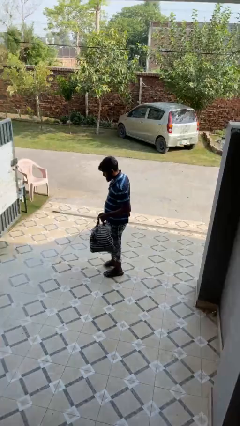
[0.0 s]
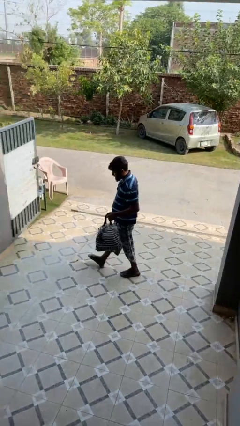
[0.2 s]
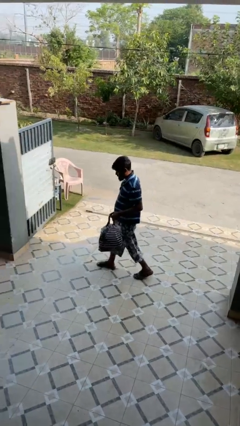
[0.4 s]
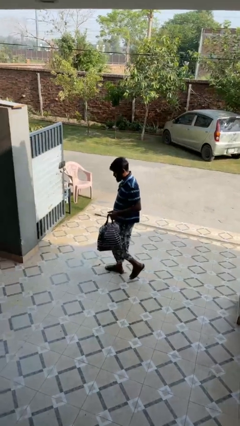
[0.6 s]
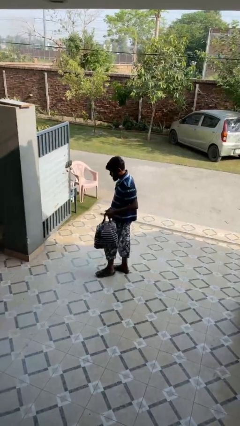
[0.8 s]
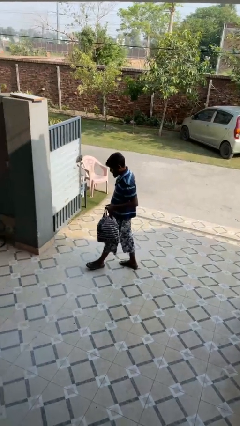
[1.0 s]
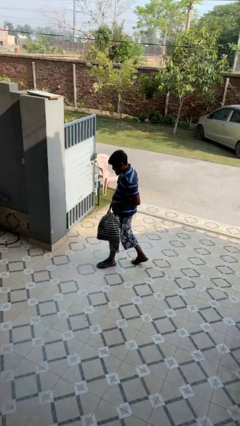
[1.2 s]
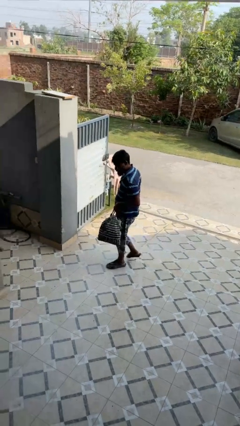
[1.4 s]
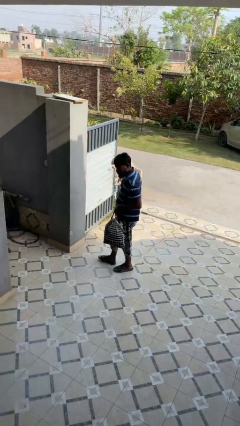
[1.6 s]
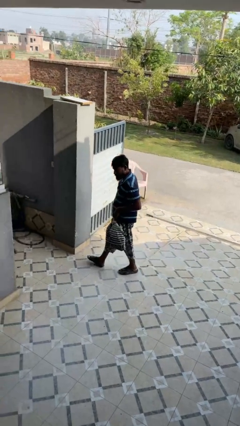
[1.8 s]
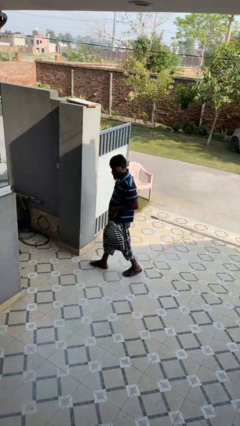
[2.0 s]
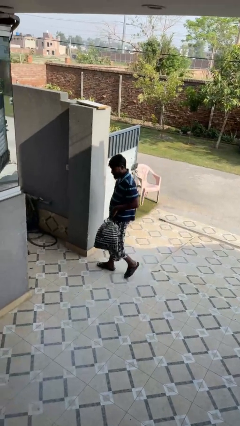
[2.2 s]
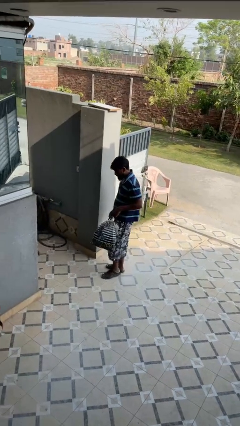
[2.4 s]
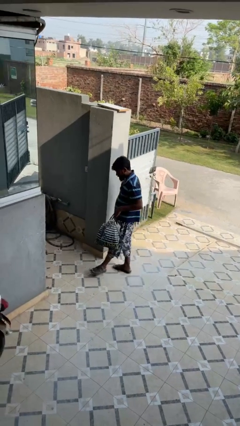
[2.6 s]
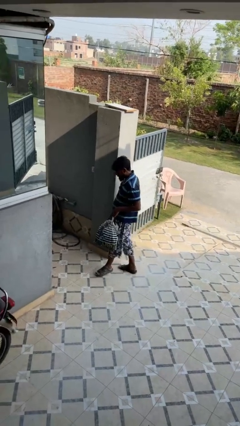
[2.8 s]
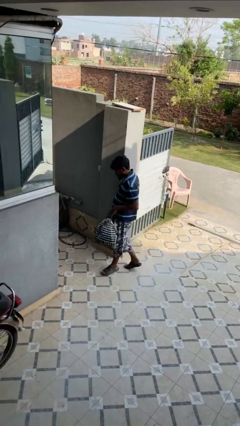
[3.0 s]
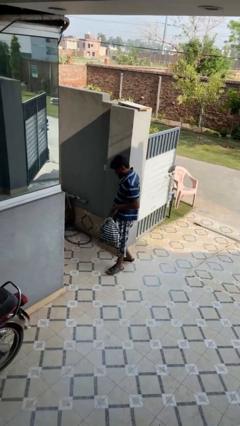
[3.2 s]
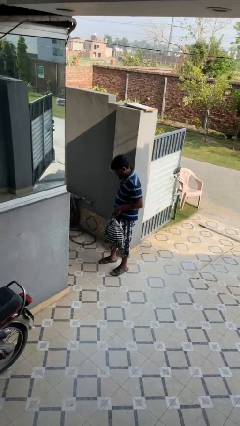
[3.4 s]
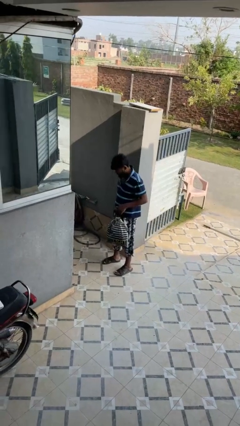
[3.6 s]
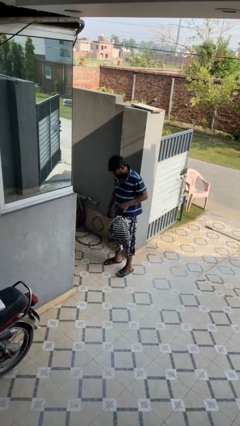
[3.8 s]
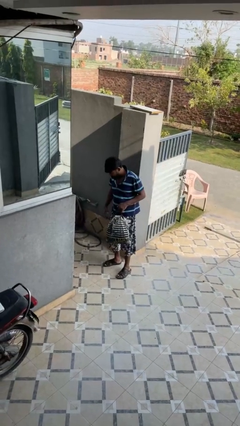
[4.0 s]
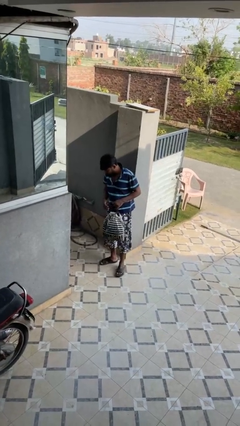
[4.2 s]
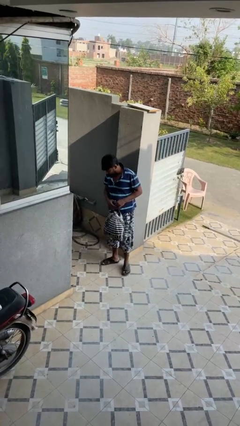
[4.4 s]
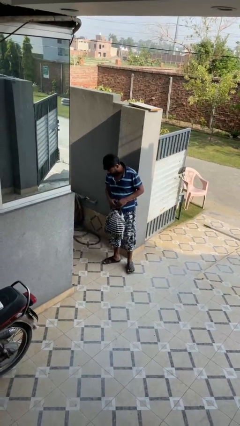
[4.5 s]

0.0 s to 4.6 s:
person carries groceries

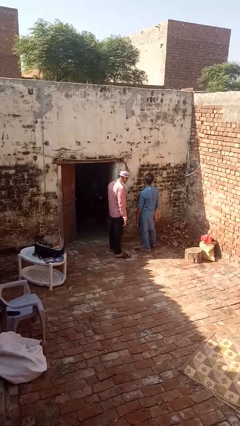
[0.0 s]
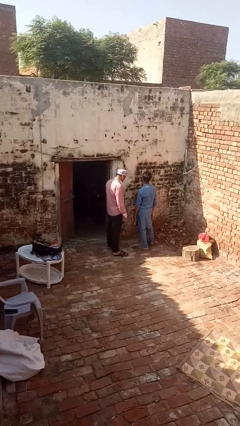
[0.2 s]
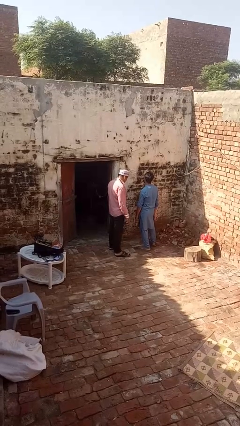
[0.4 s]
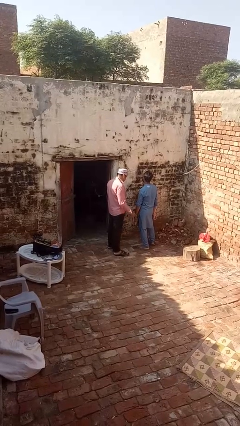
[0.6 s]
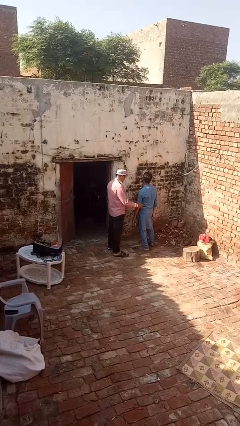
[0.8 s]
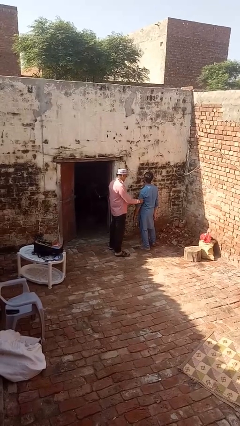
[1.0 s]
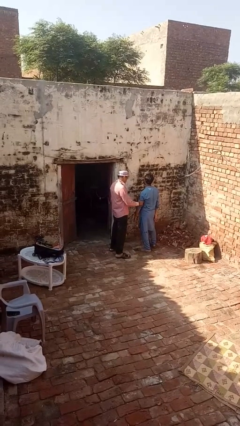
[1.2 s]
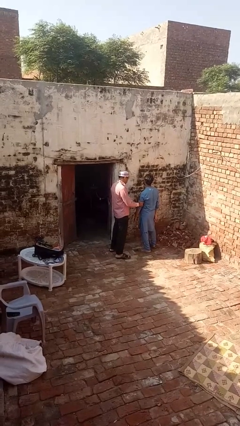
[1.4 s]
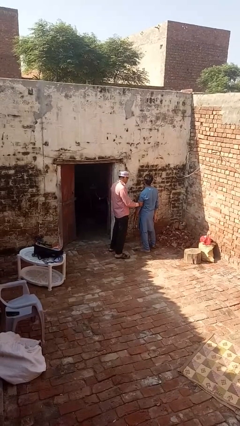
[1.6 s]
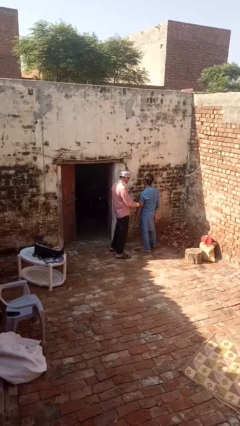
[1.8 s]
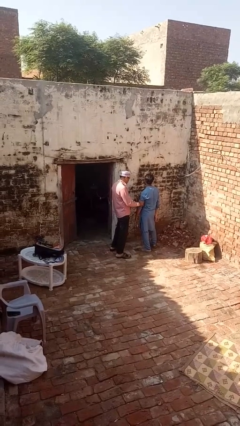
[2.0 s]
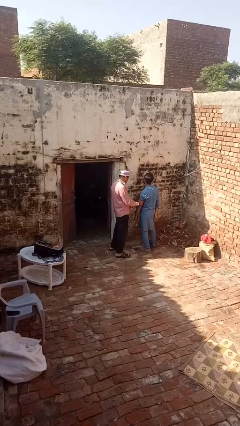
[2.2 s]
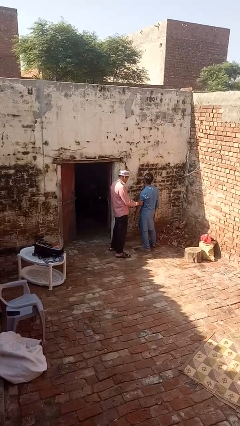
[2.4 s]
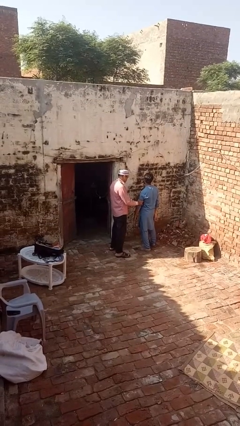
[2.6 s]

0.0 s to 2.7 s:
person grabs person by bicep

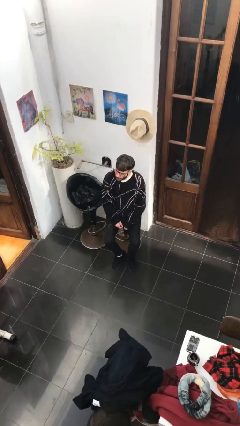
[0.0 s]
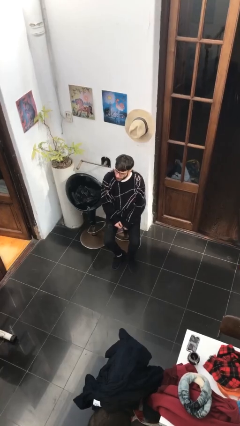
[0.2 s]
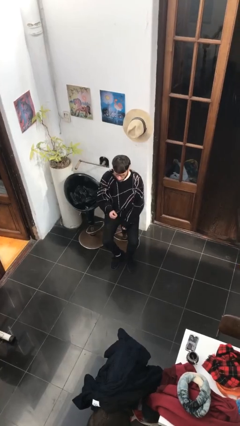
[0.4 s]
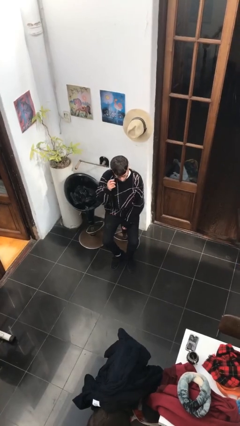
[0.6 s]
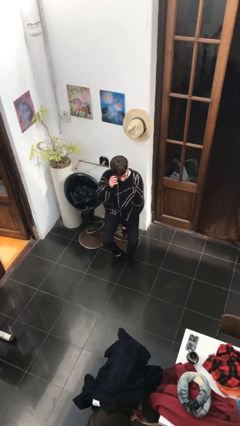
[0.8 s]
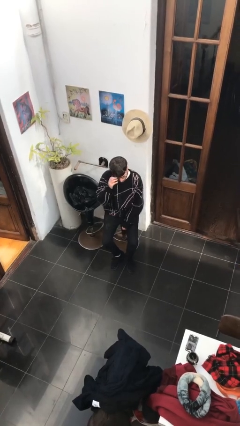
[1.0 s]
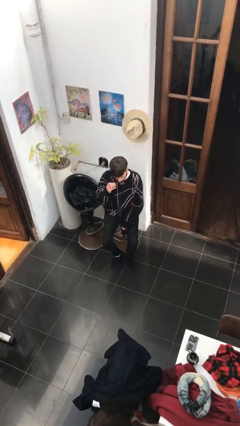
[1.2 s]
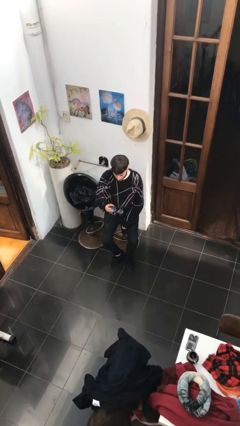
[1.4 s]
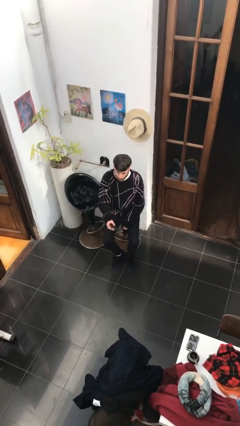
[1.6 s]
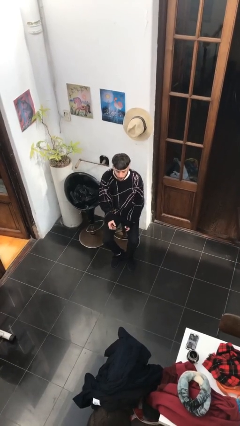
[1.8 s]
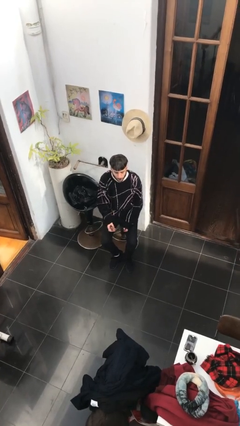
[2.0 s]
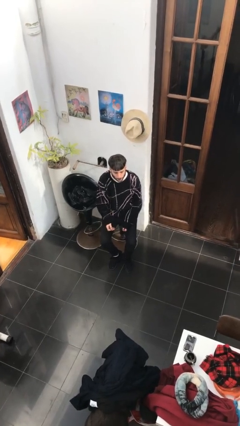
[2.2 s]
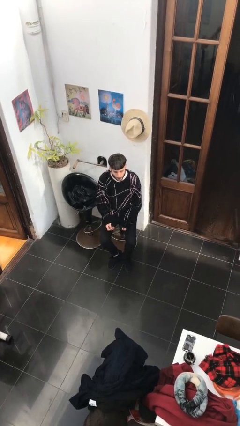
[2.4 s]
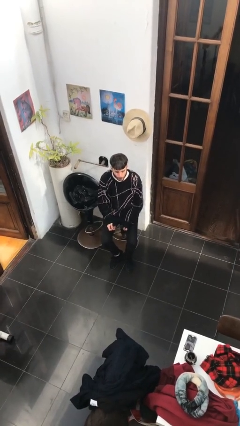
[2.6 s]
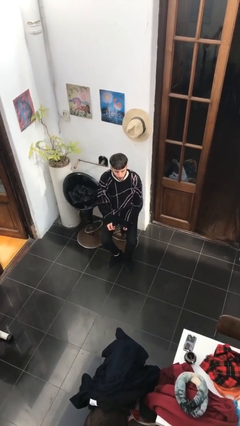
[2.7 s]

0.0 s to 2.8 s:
person takes off glasses

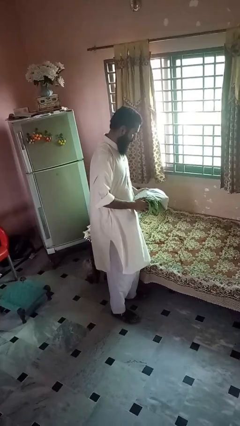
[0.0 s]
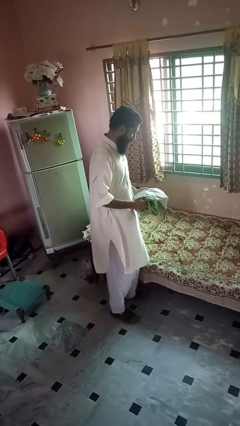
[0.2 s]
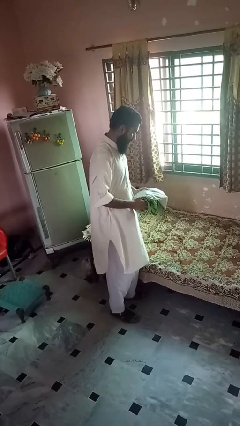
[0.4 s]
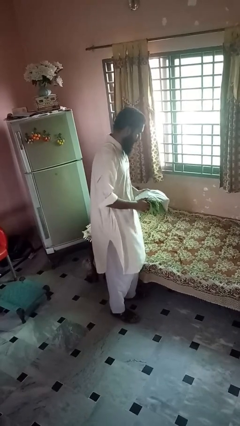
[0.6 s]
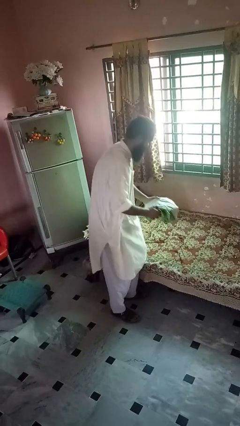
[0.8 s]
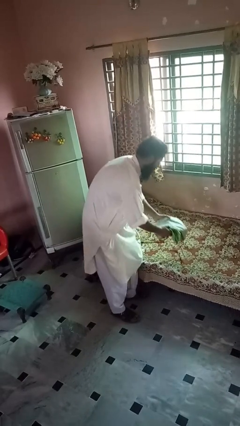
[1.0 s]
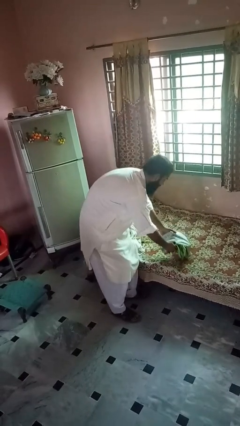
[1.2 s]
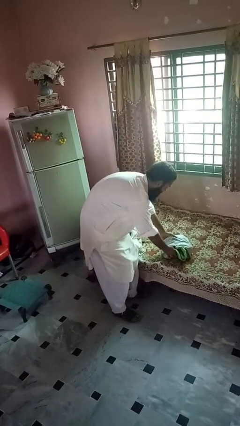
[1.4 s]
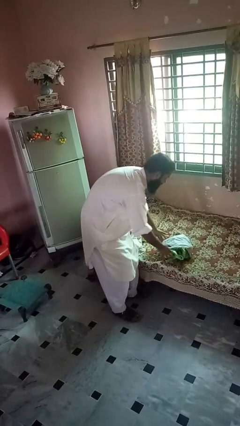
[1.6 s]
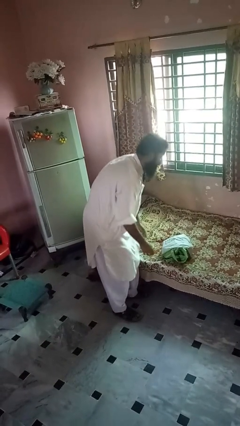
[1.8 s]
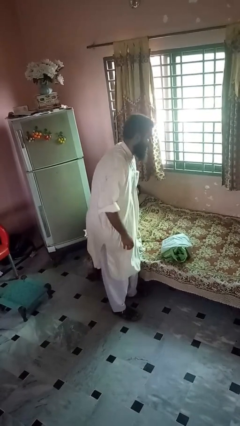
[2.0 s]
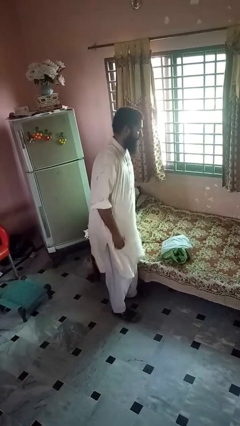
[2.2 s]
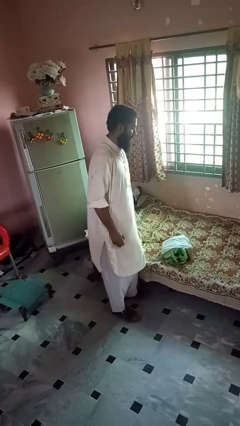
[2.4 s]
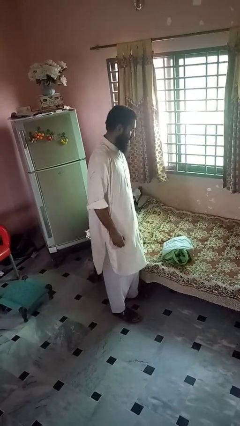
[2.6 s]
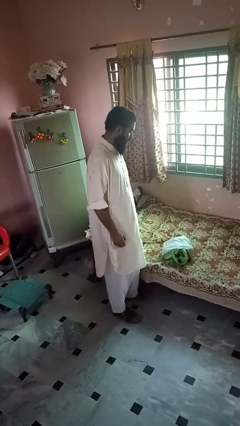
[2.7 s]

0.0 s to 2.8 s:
person puts down object on bed

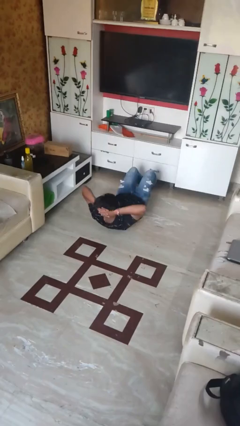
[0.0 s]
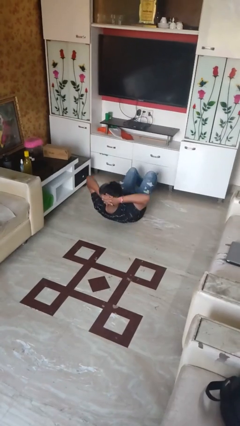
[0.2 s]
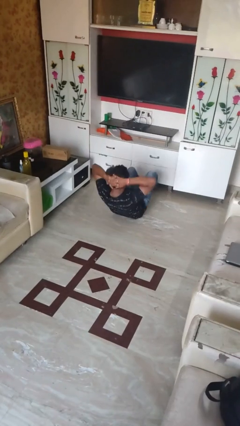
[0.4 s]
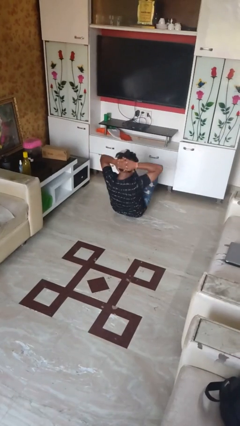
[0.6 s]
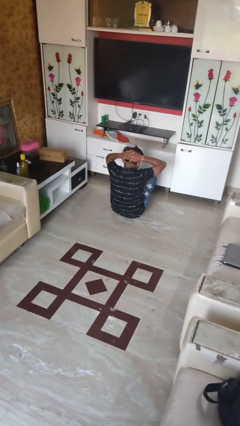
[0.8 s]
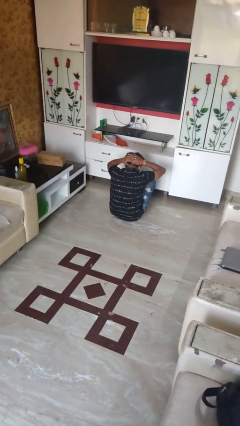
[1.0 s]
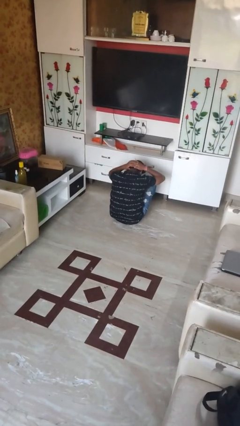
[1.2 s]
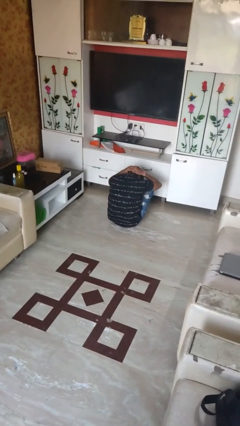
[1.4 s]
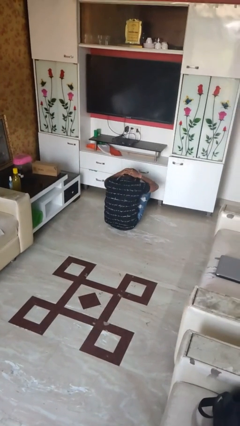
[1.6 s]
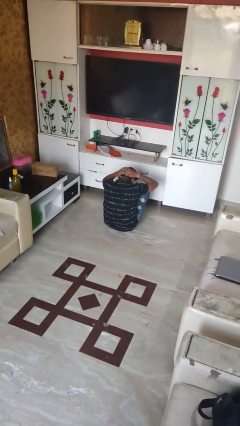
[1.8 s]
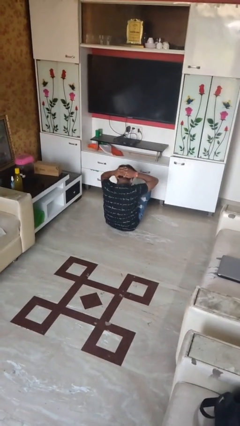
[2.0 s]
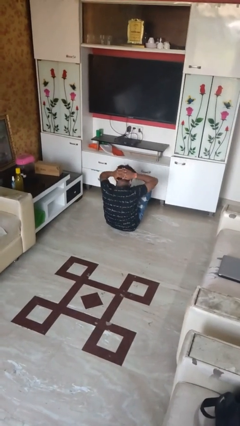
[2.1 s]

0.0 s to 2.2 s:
person exercises with situp

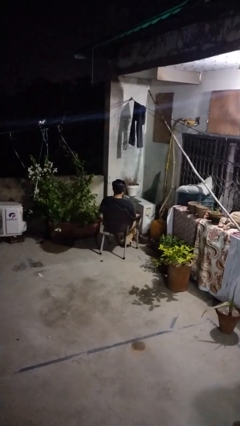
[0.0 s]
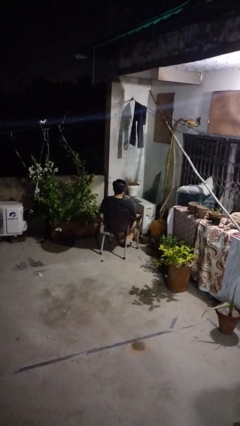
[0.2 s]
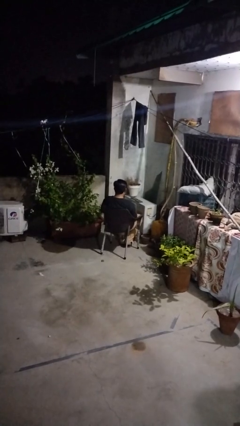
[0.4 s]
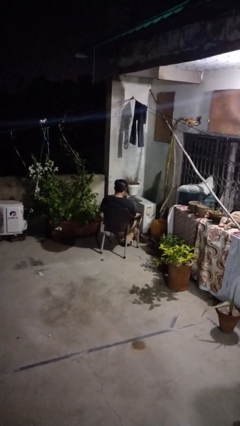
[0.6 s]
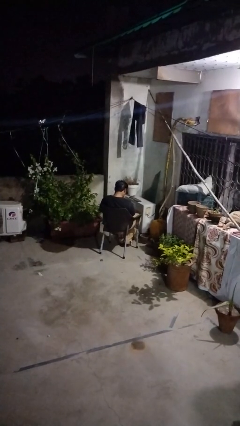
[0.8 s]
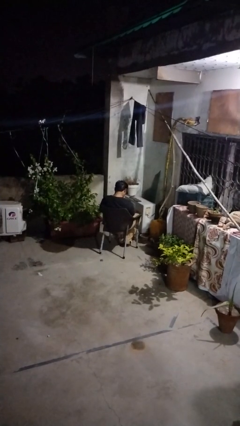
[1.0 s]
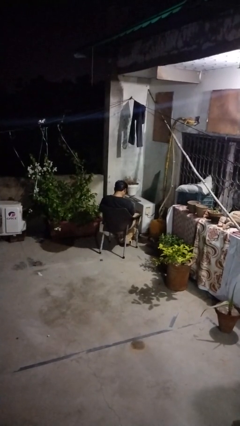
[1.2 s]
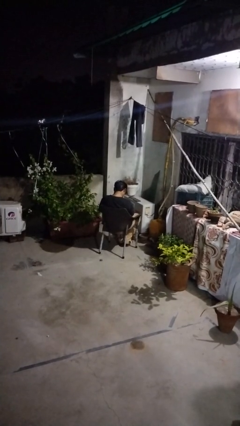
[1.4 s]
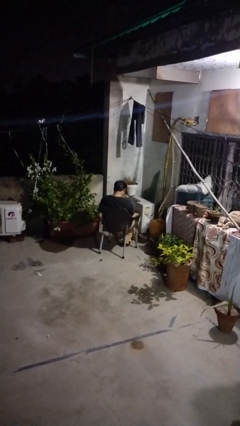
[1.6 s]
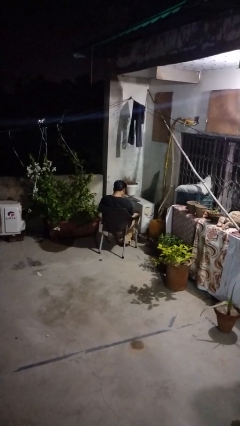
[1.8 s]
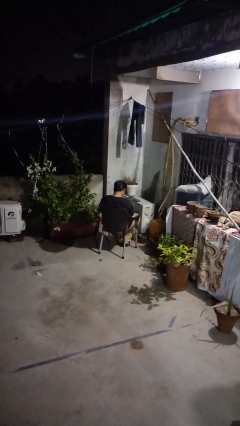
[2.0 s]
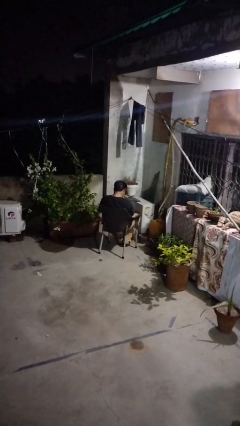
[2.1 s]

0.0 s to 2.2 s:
person blows nose

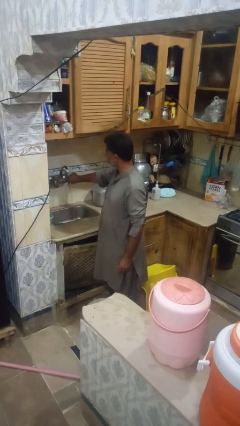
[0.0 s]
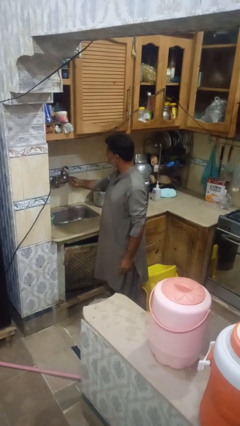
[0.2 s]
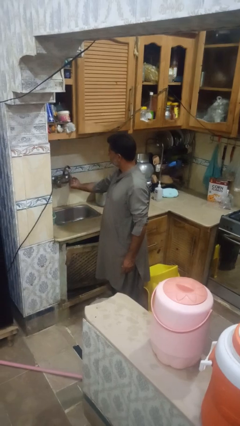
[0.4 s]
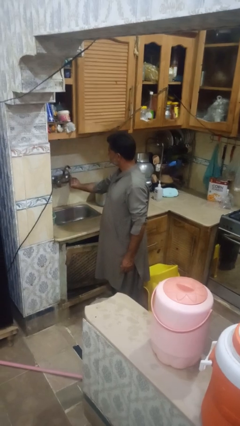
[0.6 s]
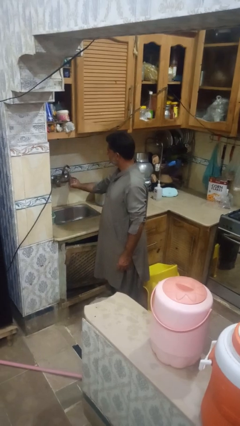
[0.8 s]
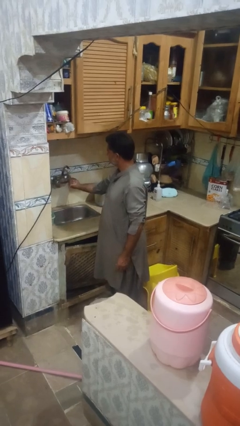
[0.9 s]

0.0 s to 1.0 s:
person turns off faucet
